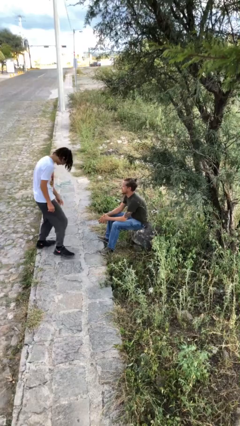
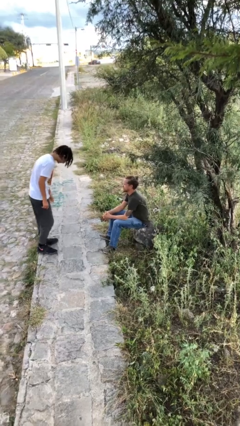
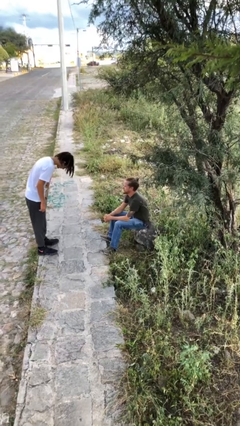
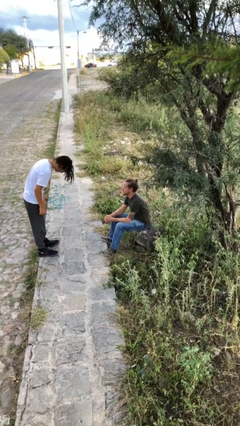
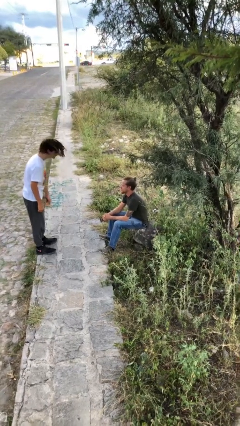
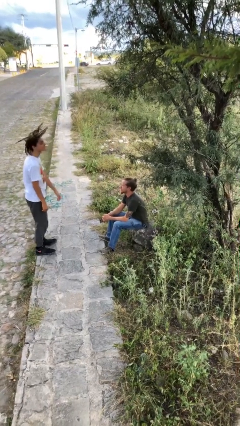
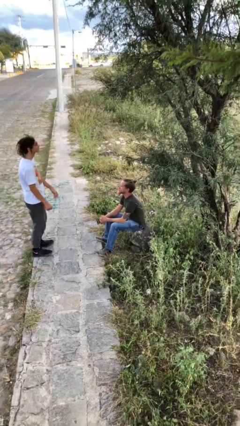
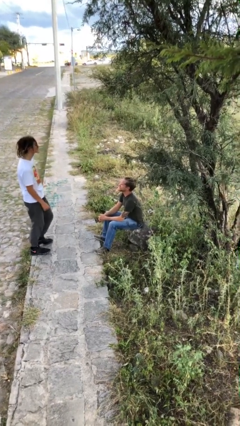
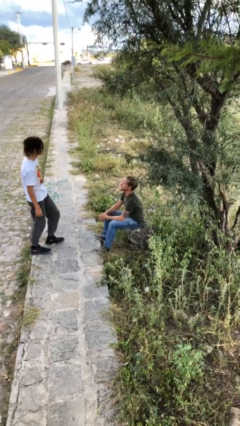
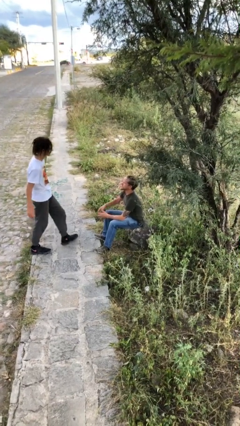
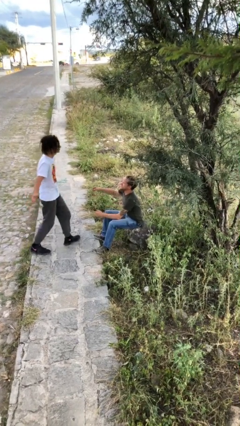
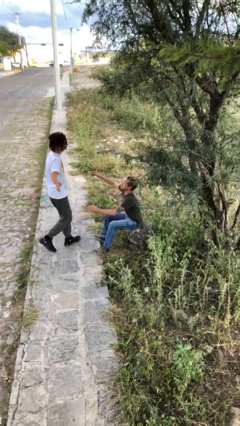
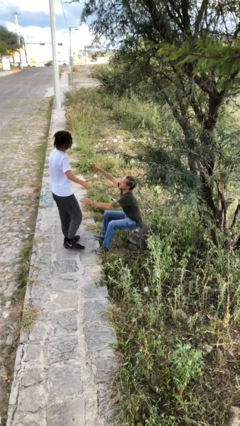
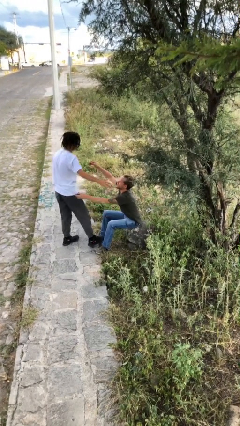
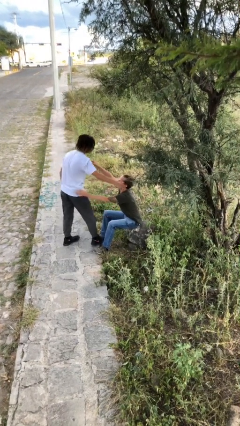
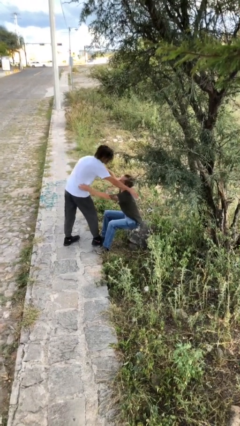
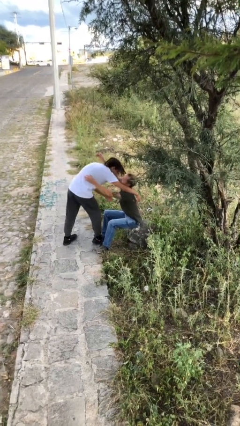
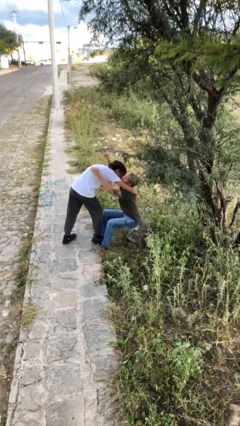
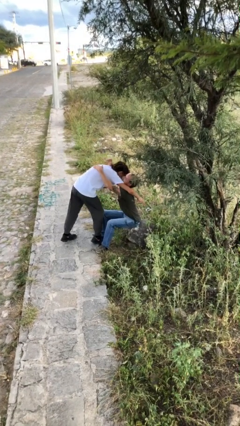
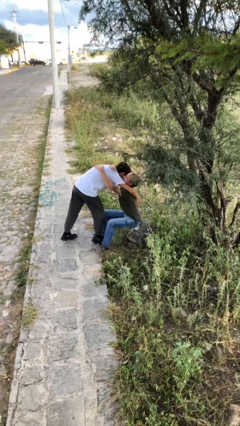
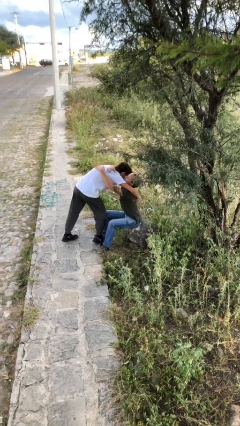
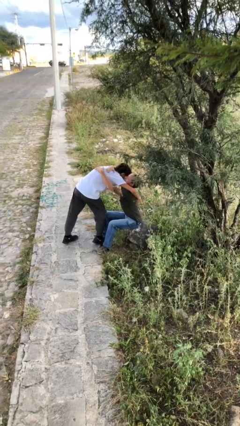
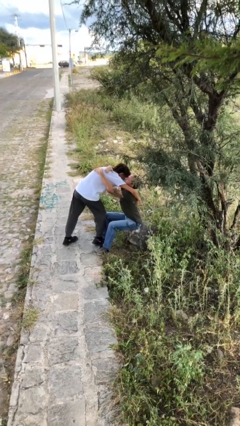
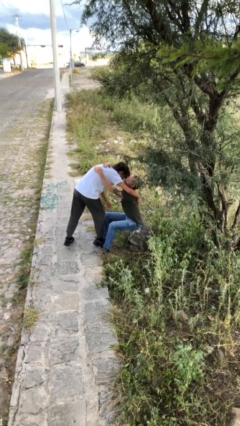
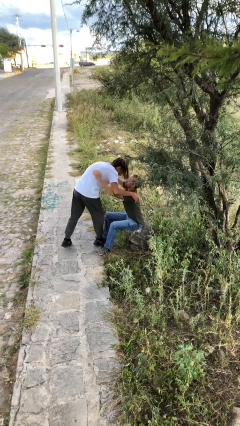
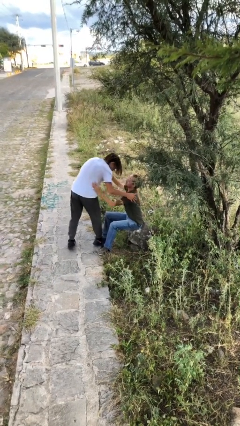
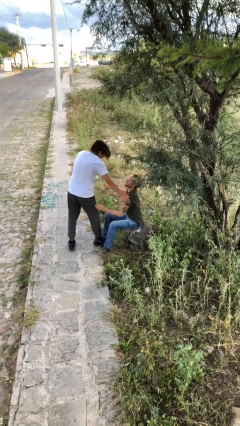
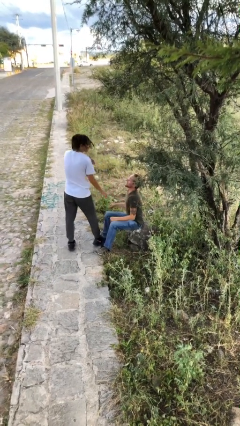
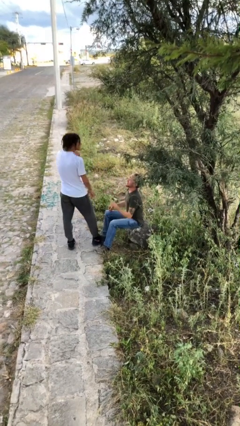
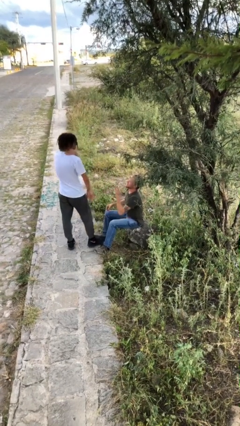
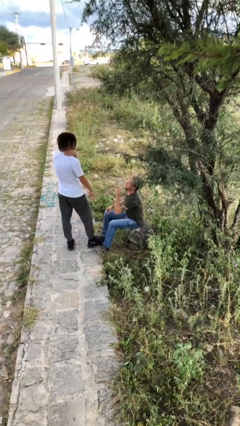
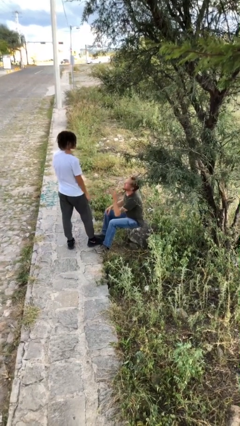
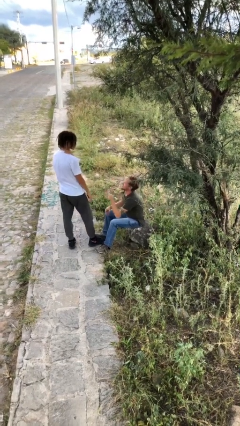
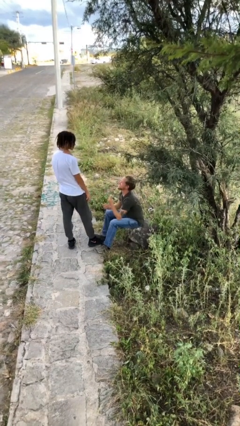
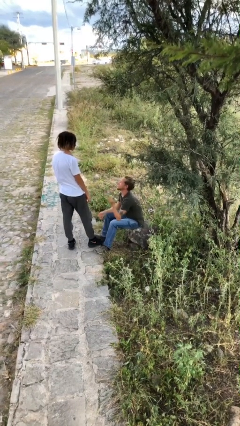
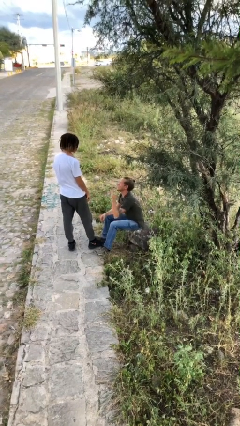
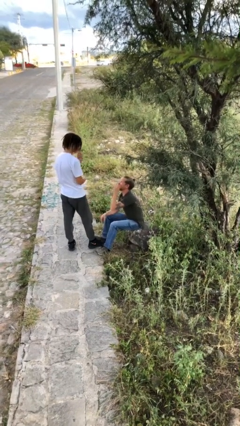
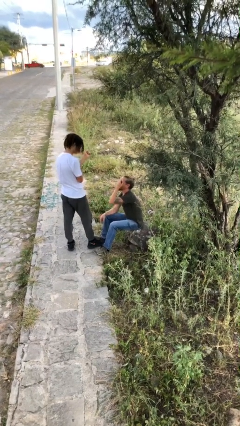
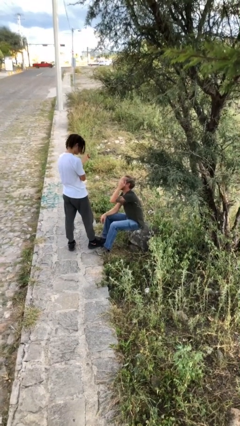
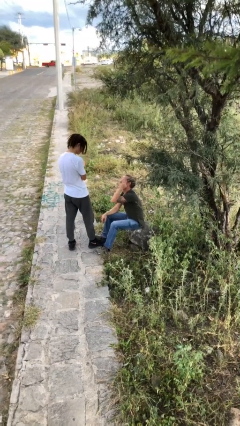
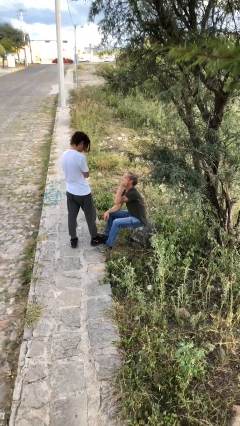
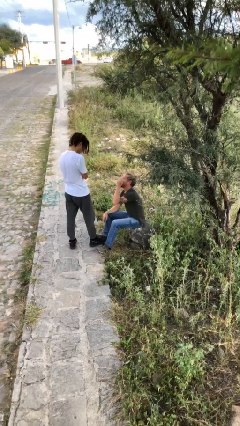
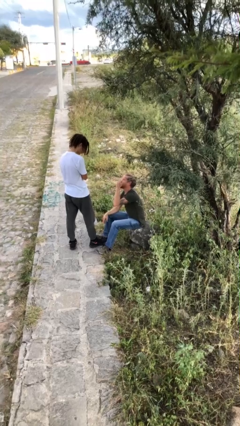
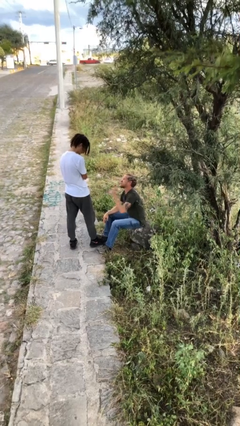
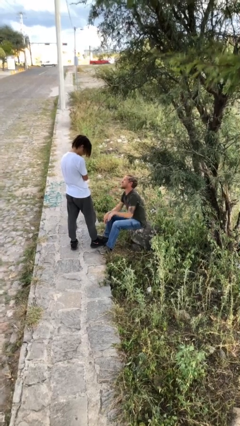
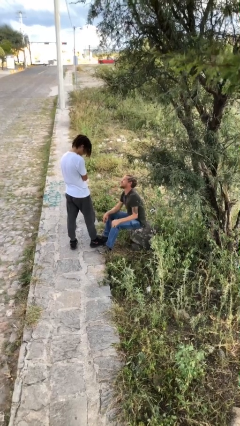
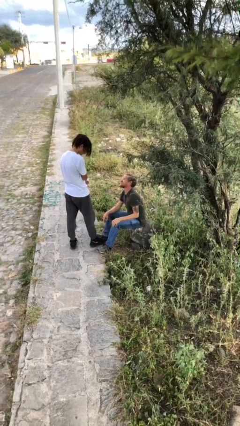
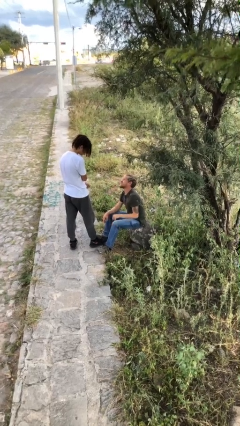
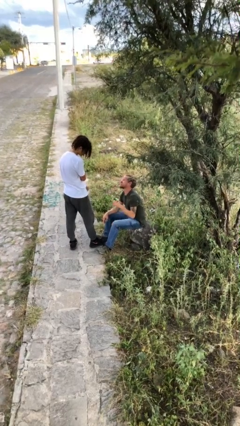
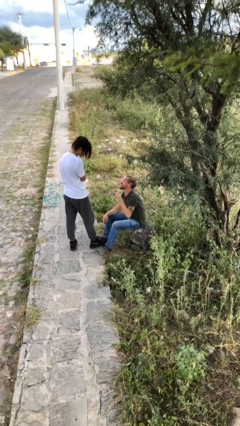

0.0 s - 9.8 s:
person embraces person

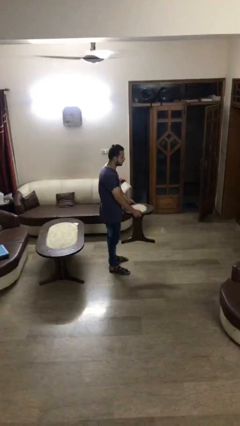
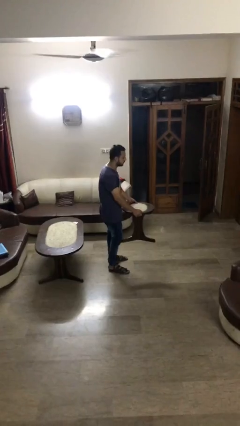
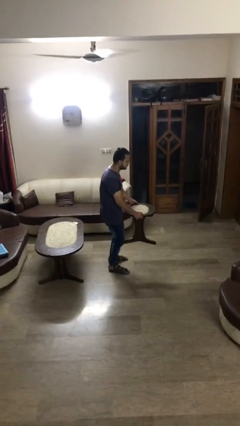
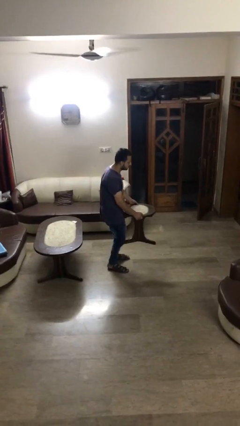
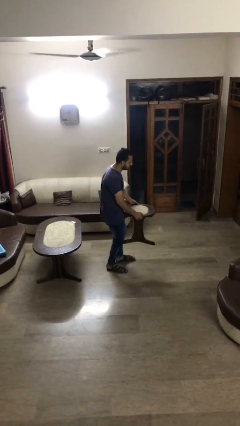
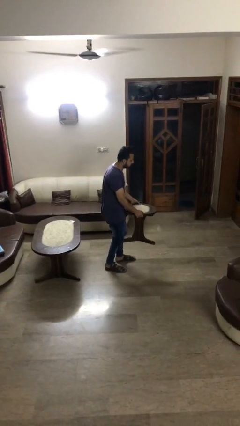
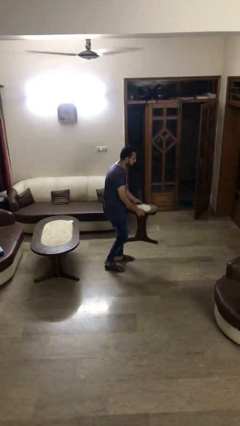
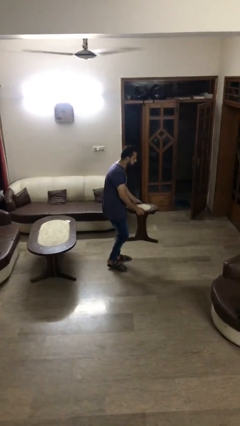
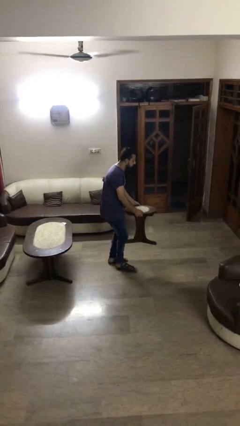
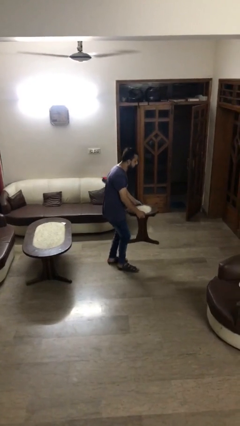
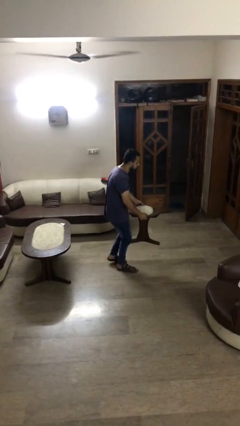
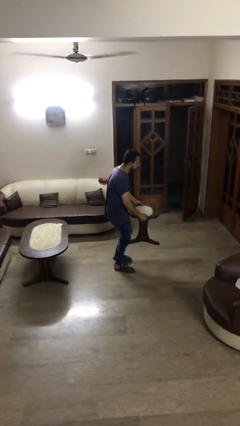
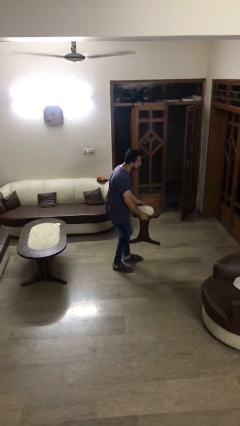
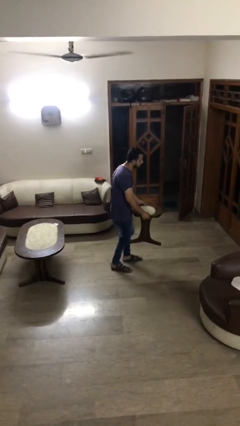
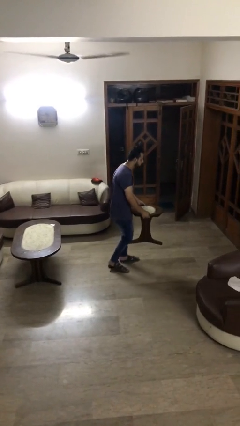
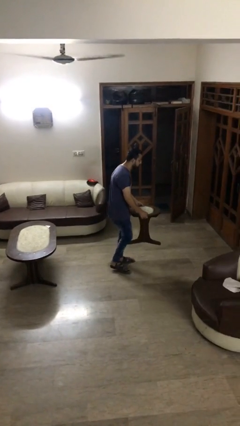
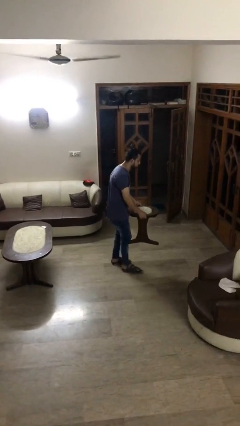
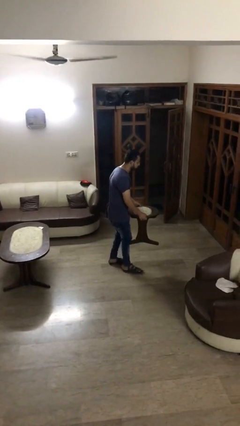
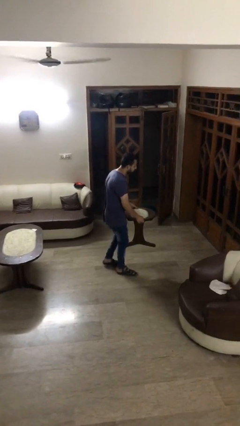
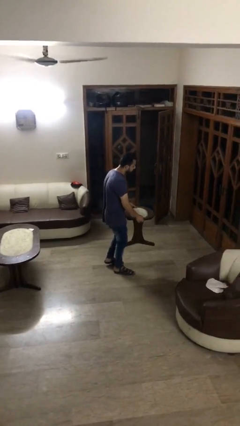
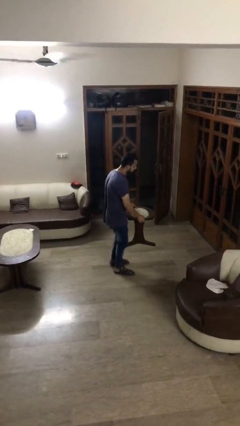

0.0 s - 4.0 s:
person carries heavy object

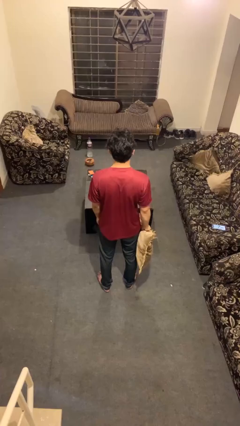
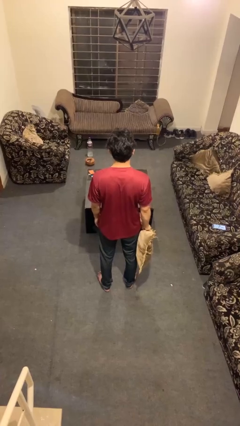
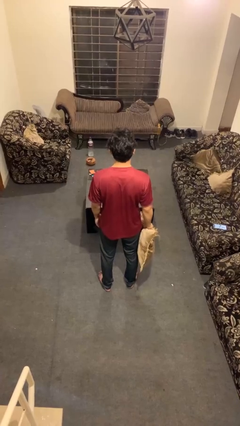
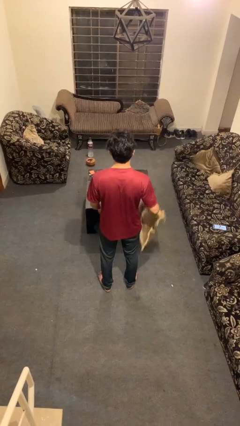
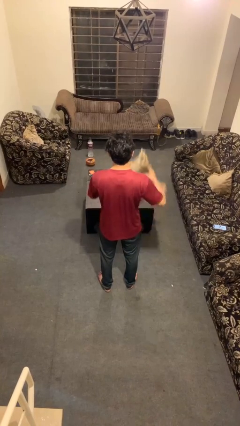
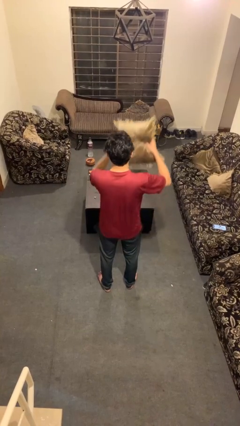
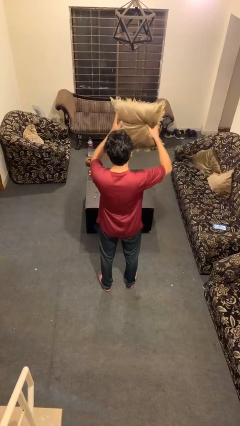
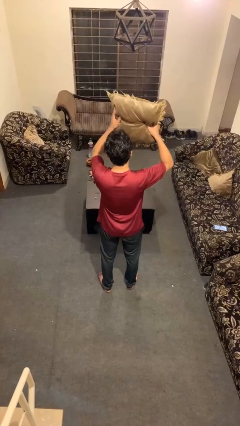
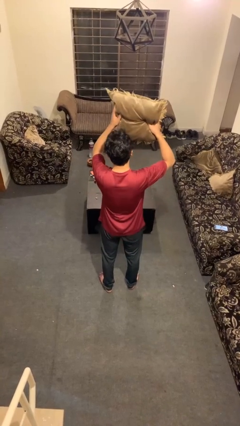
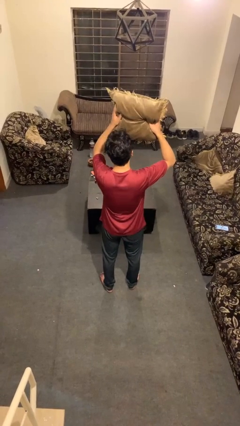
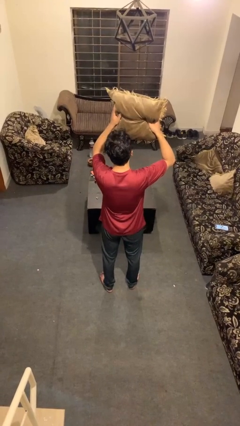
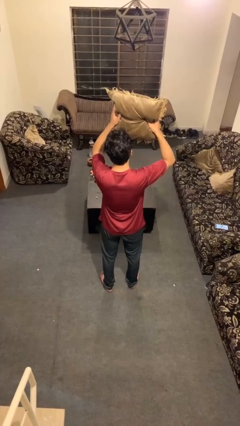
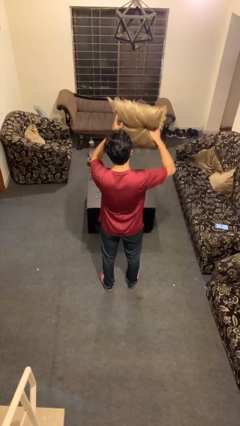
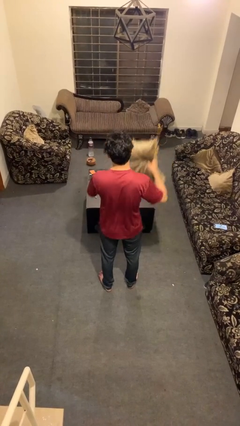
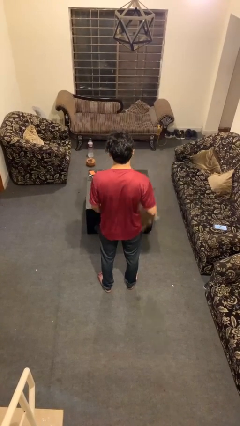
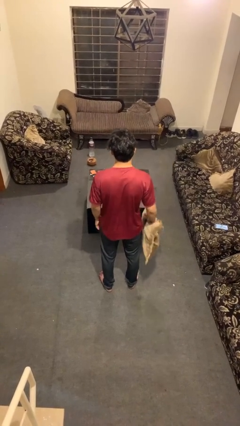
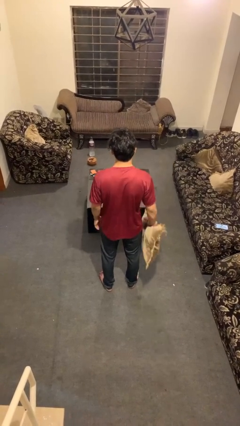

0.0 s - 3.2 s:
person holds object above head

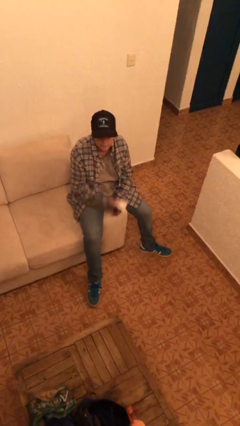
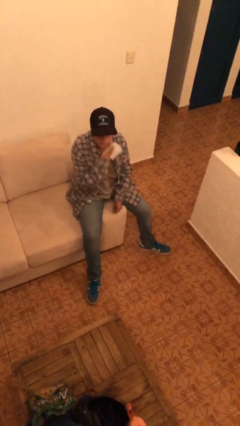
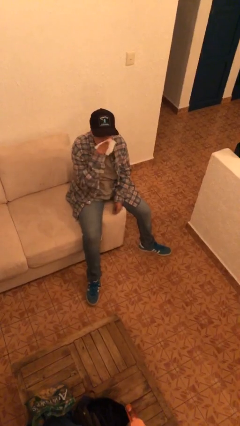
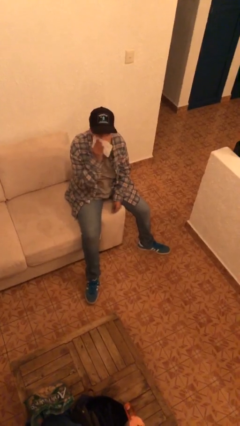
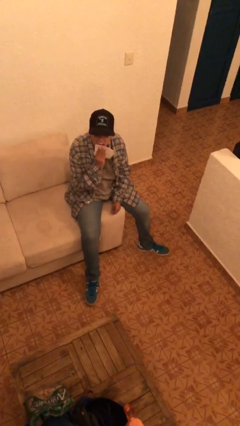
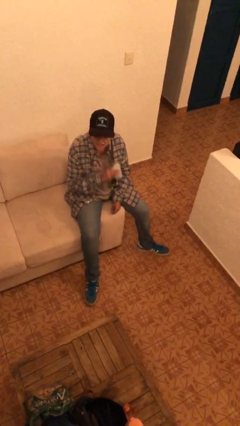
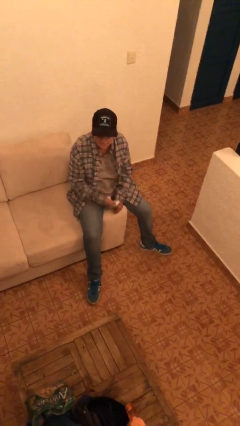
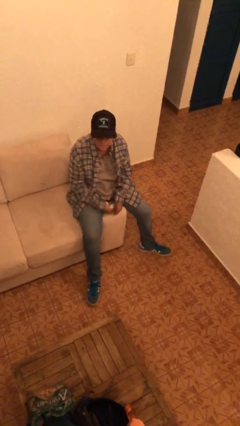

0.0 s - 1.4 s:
person wipes mouth with napkin
